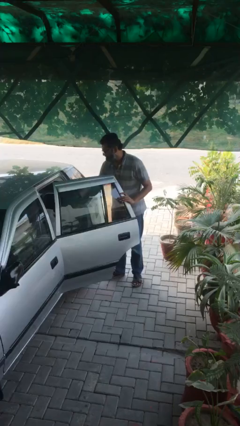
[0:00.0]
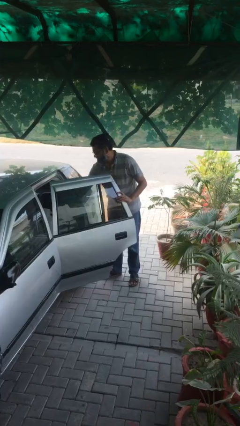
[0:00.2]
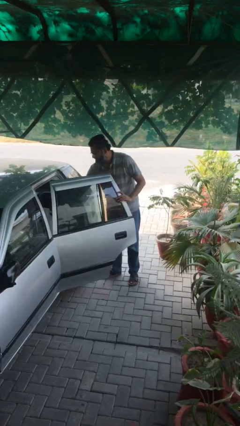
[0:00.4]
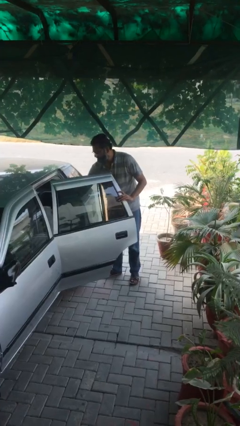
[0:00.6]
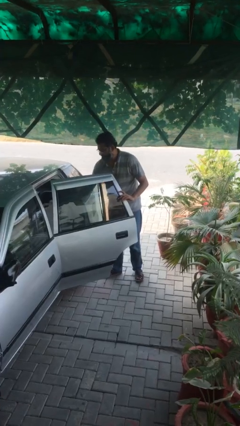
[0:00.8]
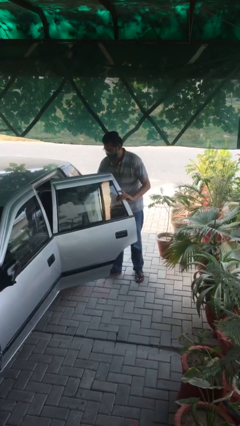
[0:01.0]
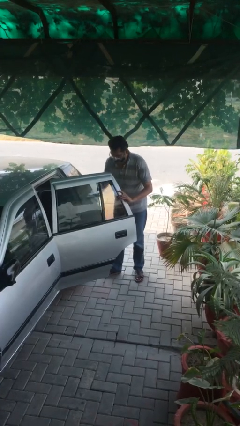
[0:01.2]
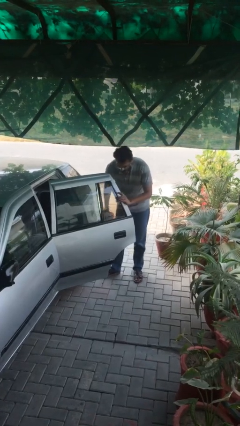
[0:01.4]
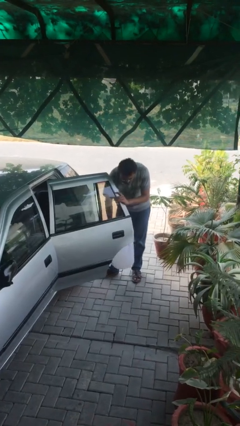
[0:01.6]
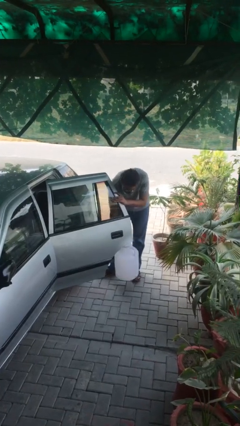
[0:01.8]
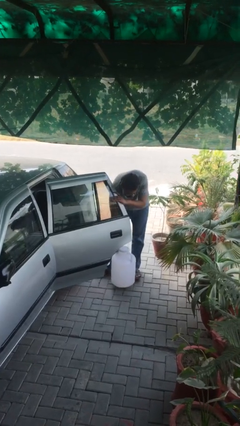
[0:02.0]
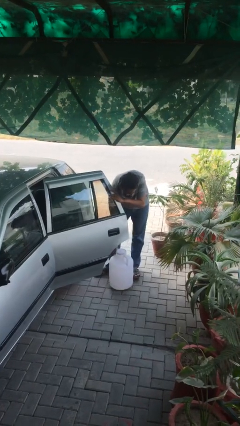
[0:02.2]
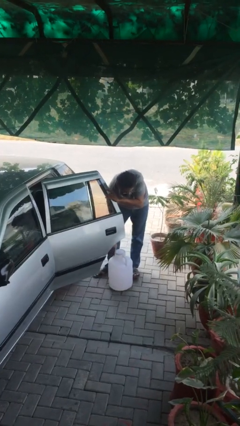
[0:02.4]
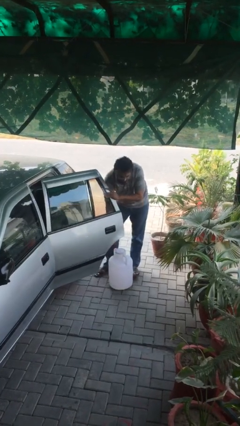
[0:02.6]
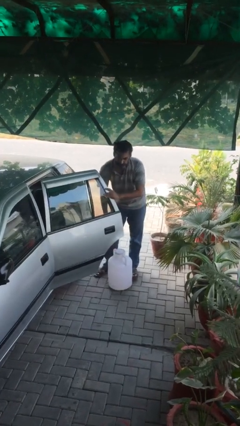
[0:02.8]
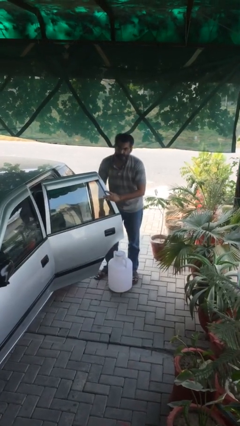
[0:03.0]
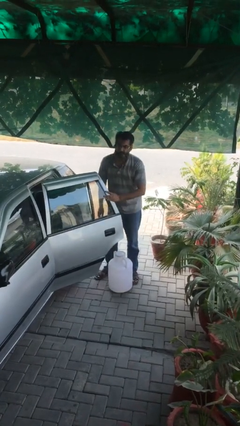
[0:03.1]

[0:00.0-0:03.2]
person unloads car

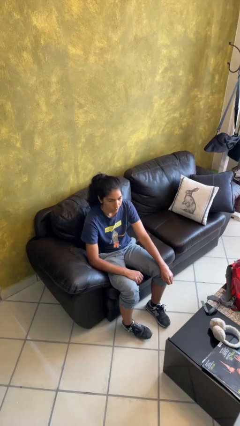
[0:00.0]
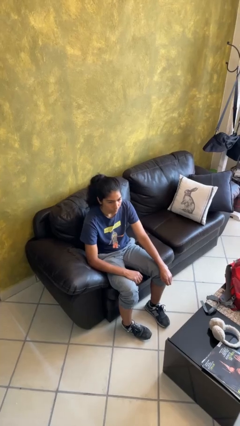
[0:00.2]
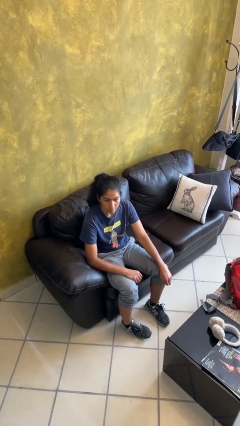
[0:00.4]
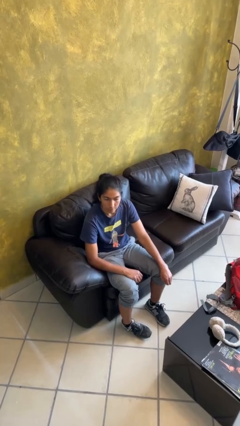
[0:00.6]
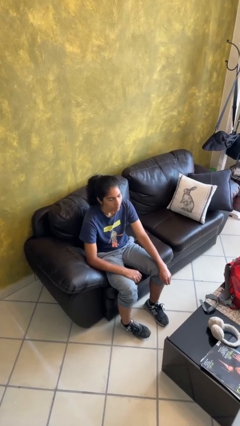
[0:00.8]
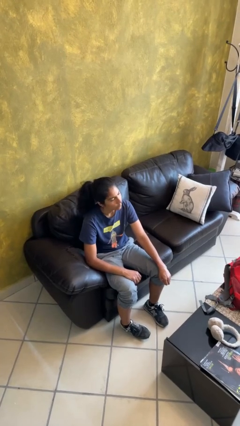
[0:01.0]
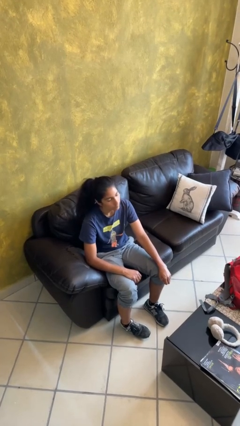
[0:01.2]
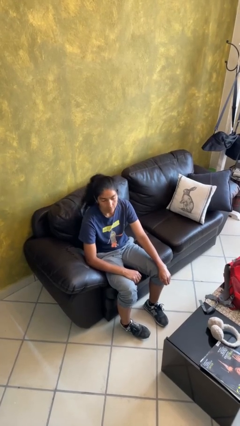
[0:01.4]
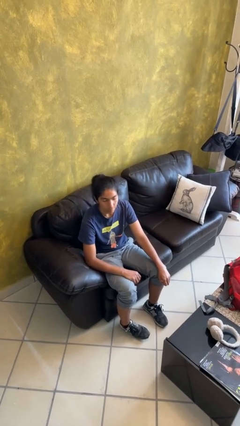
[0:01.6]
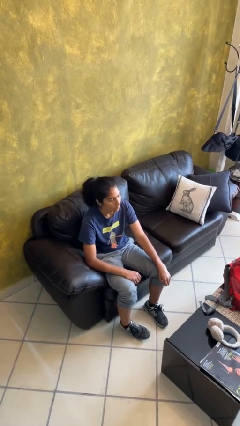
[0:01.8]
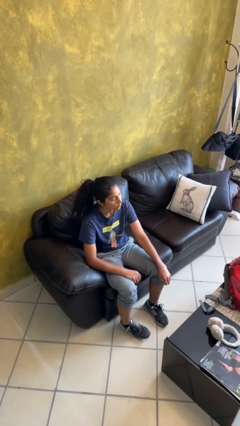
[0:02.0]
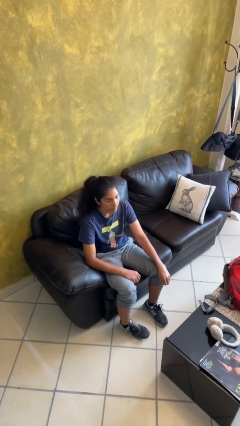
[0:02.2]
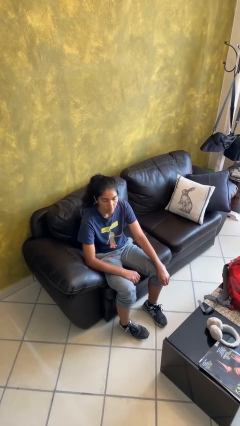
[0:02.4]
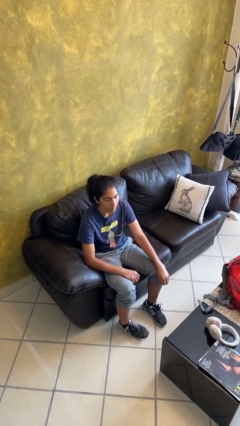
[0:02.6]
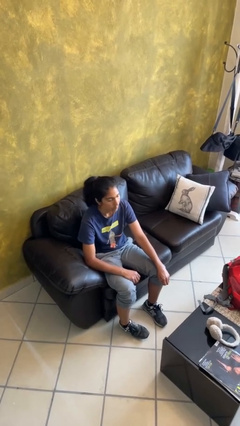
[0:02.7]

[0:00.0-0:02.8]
person shakes head

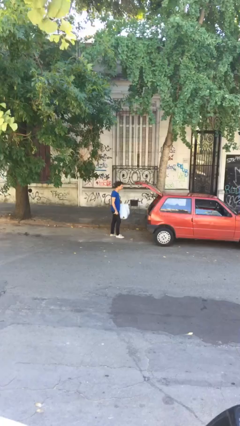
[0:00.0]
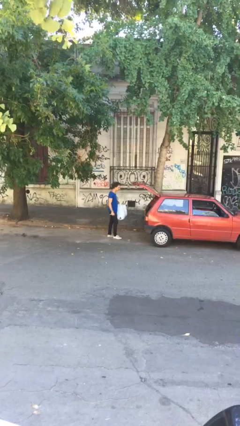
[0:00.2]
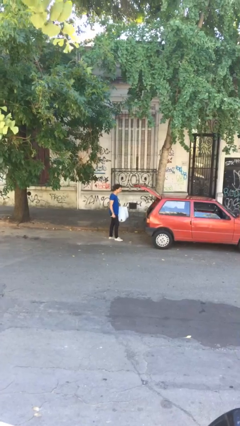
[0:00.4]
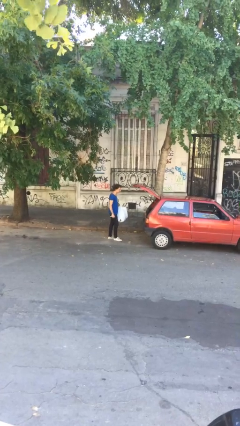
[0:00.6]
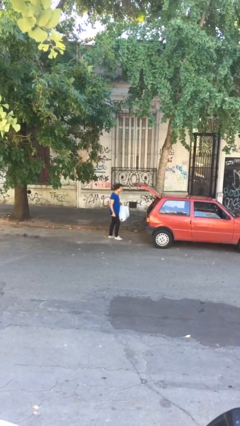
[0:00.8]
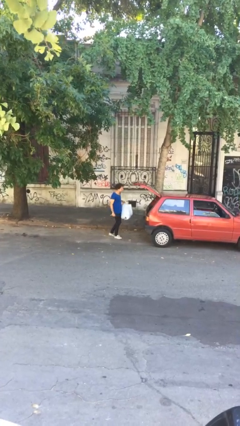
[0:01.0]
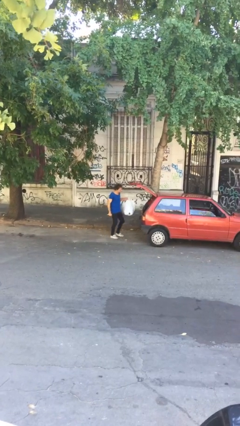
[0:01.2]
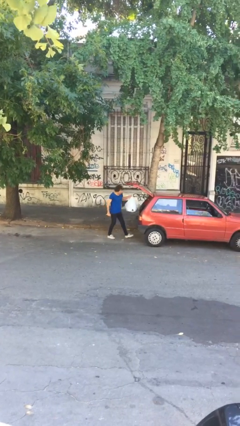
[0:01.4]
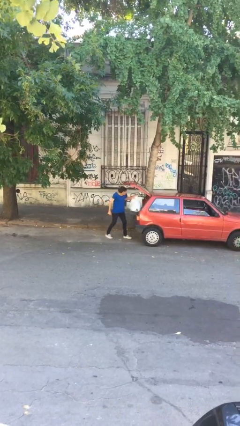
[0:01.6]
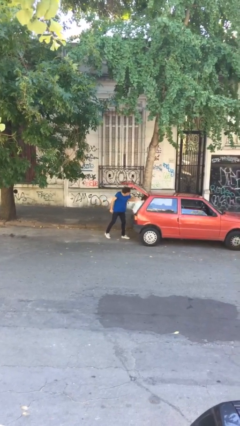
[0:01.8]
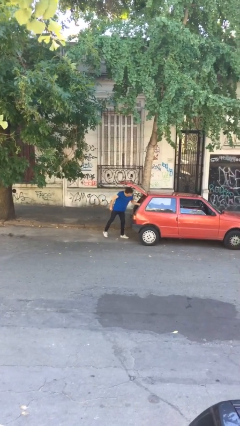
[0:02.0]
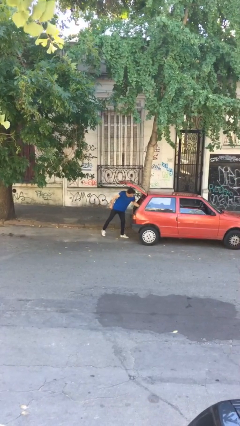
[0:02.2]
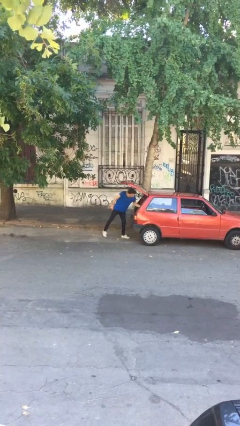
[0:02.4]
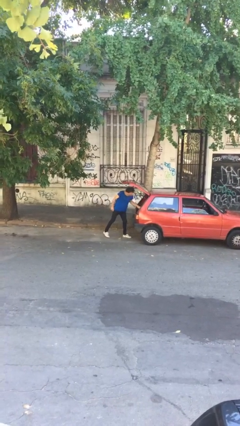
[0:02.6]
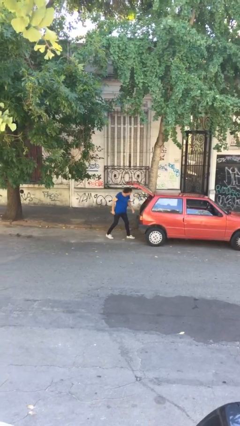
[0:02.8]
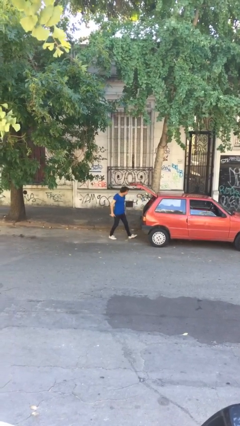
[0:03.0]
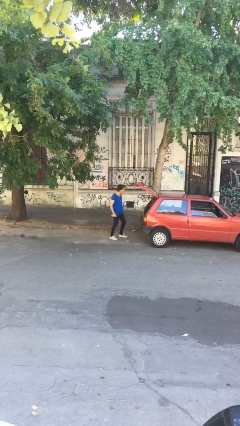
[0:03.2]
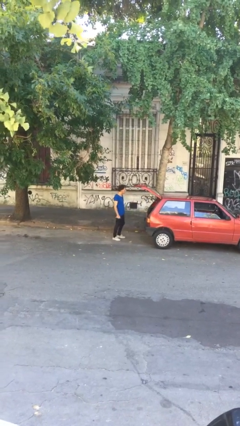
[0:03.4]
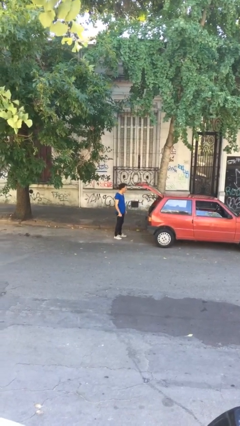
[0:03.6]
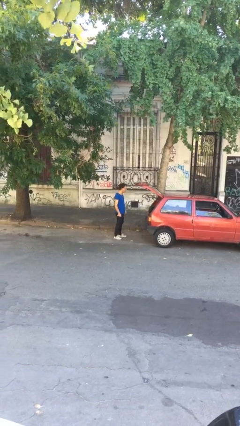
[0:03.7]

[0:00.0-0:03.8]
person loads car

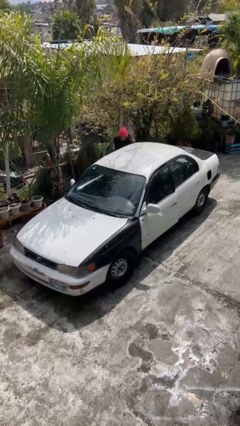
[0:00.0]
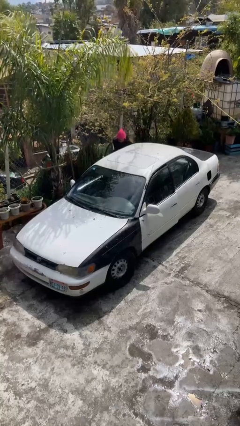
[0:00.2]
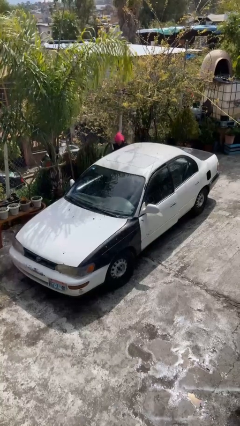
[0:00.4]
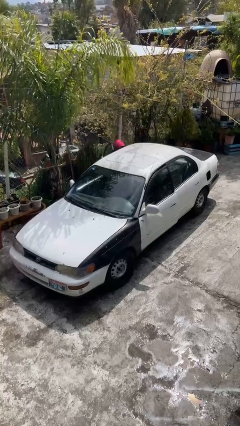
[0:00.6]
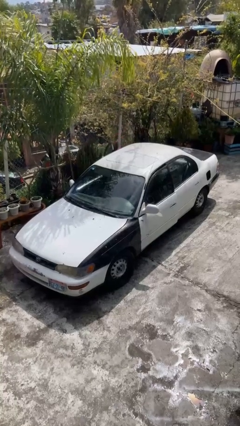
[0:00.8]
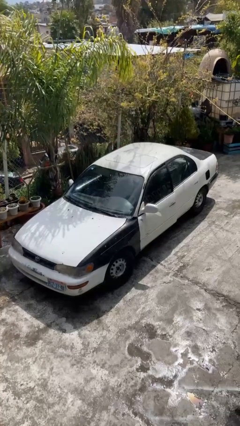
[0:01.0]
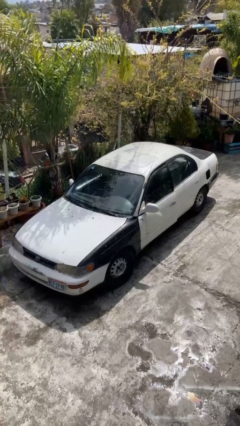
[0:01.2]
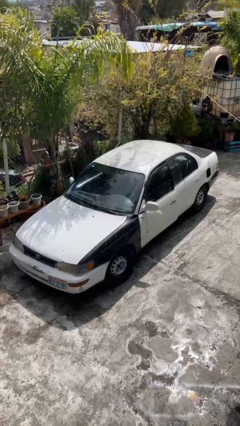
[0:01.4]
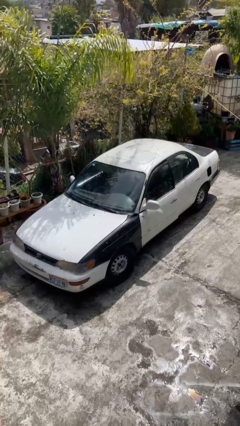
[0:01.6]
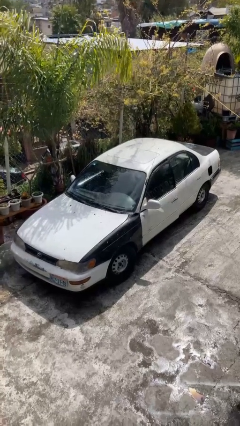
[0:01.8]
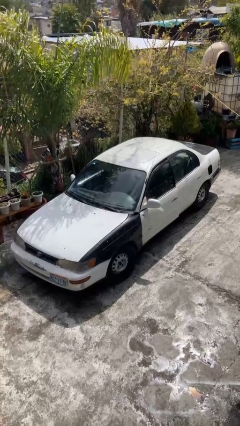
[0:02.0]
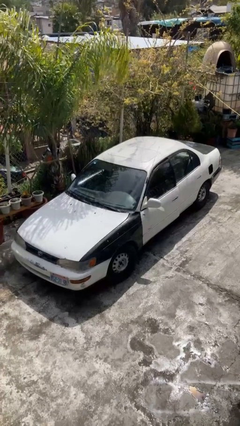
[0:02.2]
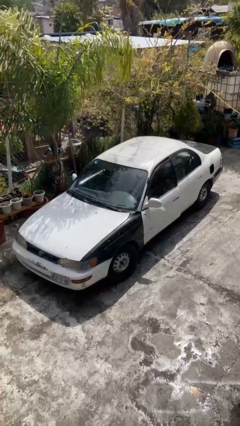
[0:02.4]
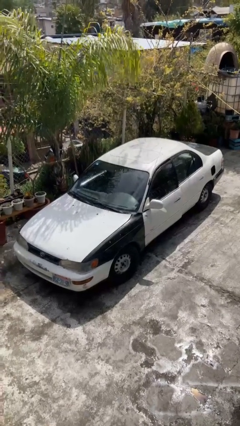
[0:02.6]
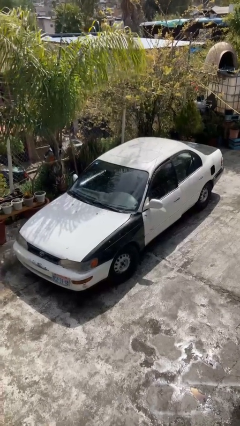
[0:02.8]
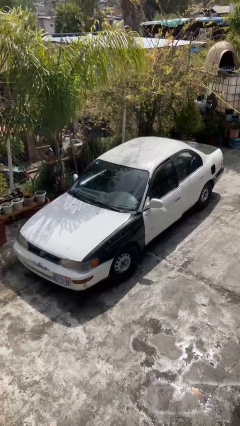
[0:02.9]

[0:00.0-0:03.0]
car picks up person

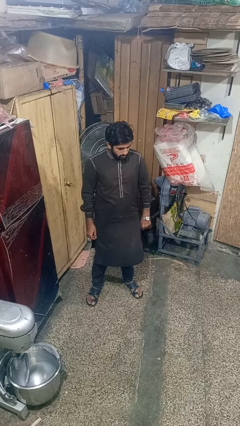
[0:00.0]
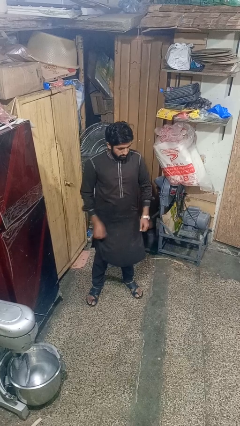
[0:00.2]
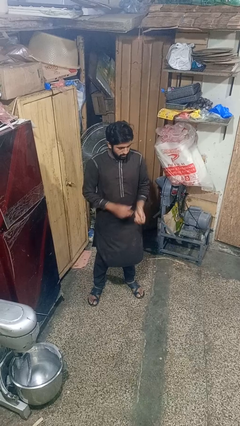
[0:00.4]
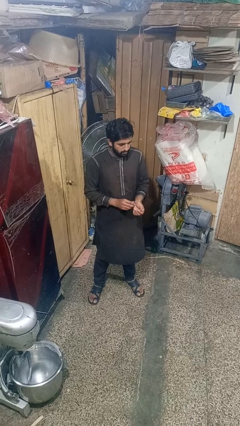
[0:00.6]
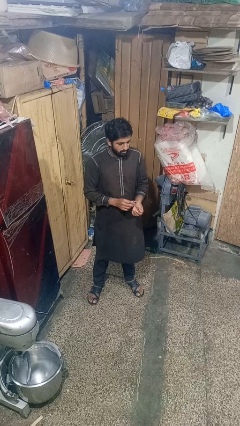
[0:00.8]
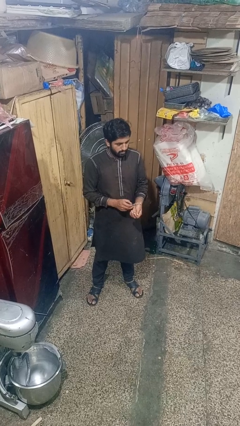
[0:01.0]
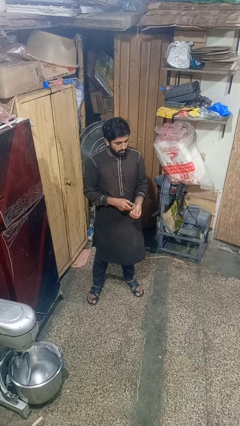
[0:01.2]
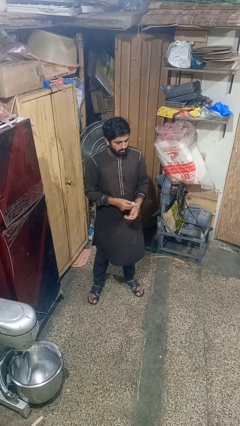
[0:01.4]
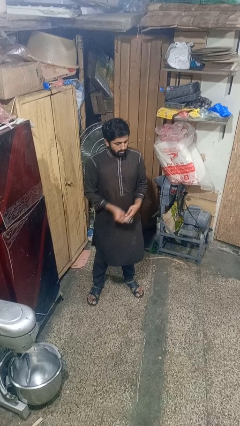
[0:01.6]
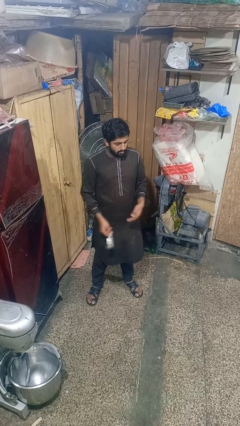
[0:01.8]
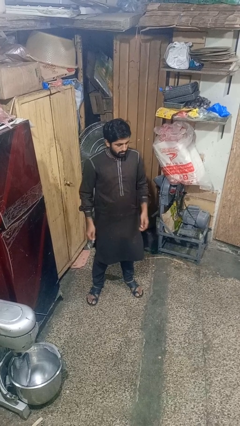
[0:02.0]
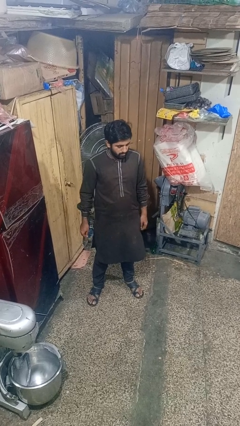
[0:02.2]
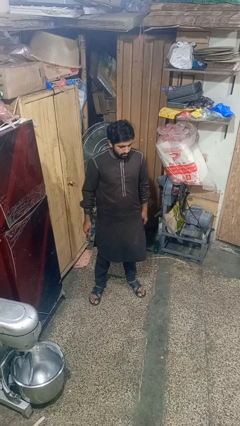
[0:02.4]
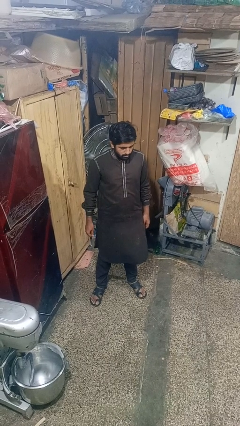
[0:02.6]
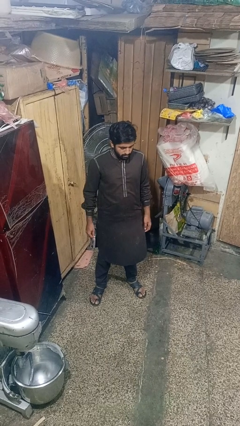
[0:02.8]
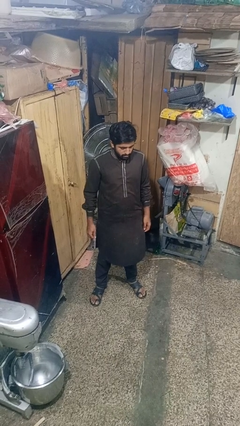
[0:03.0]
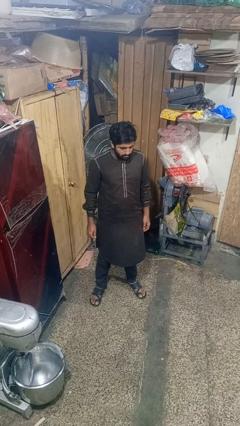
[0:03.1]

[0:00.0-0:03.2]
person takes off wristwatch

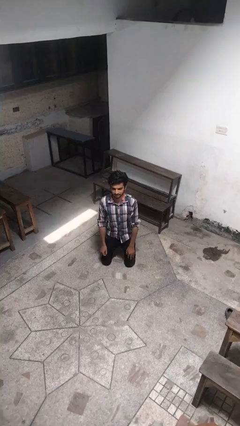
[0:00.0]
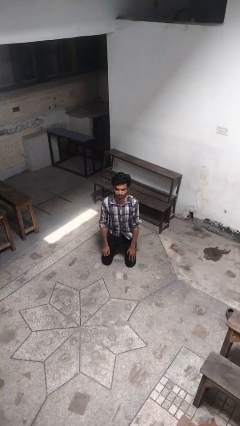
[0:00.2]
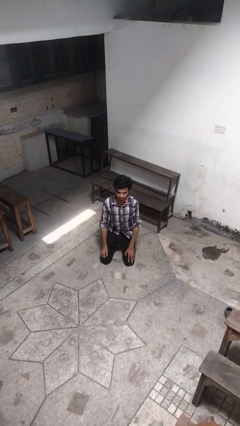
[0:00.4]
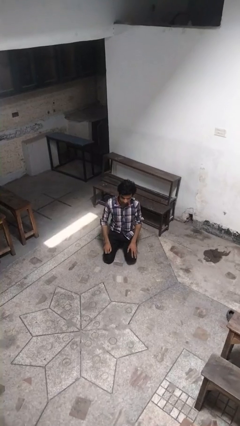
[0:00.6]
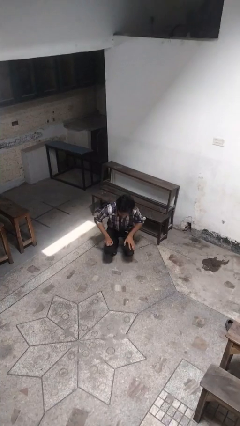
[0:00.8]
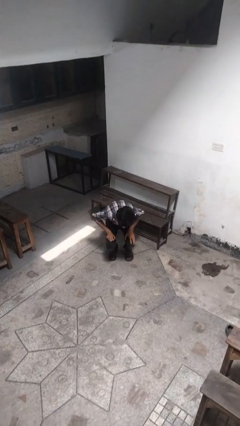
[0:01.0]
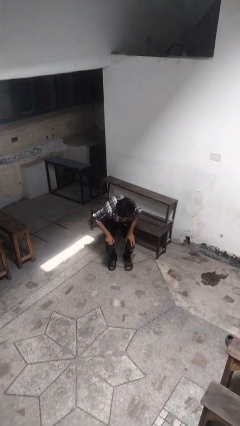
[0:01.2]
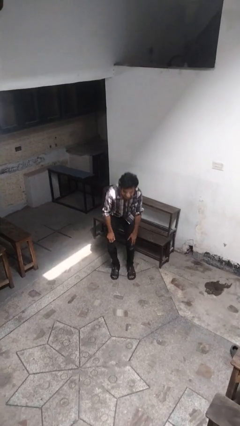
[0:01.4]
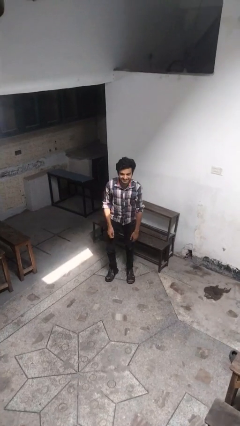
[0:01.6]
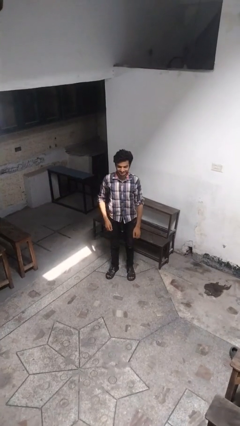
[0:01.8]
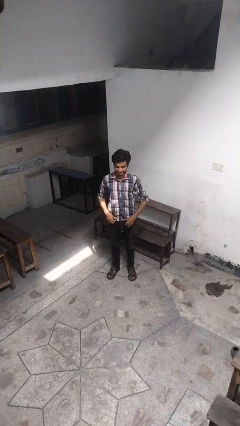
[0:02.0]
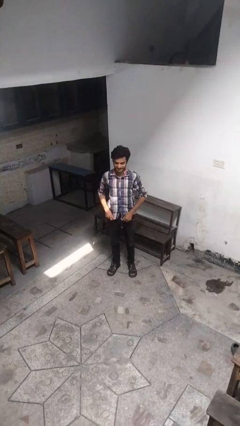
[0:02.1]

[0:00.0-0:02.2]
person stands up from floor
